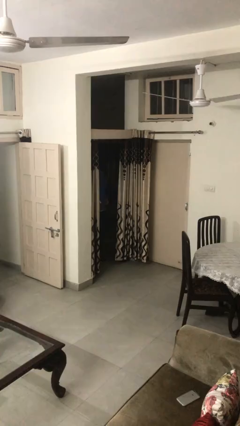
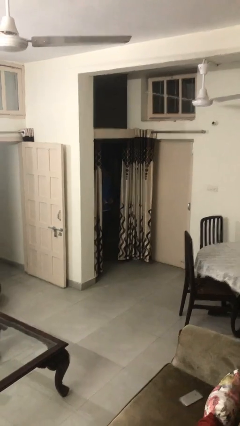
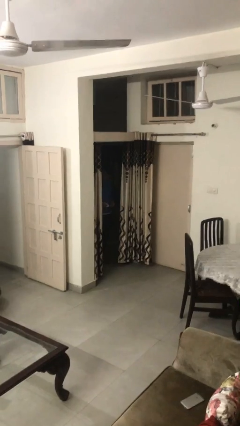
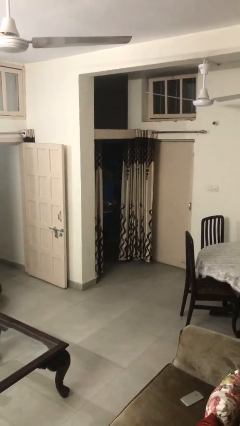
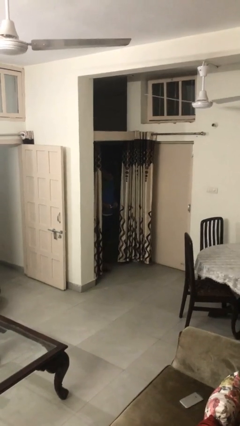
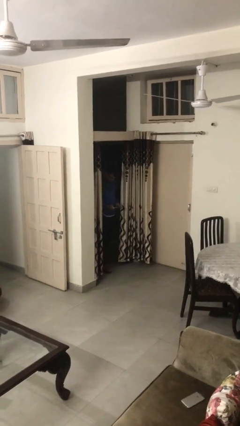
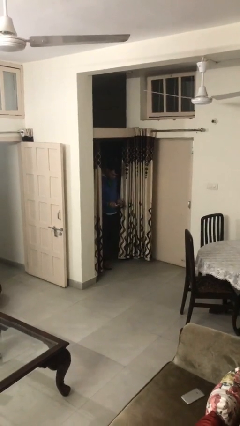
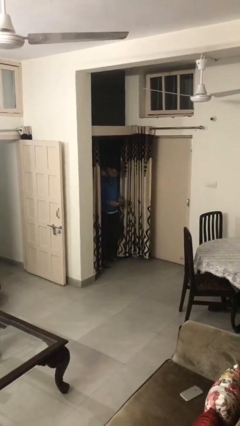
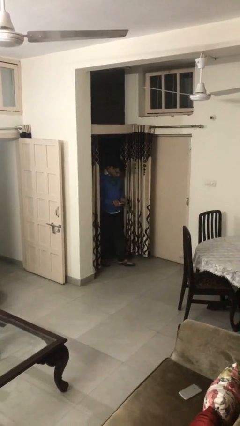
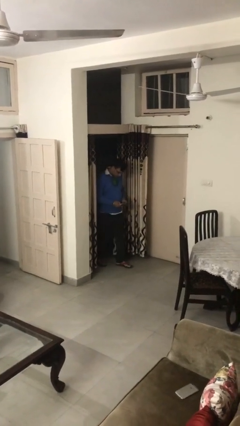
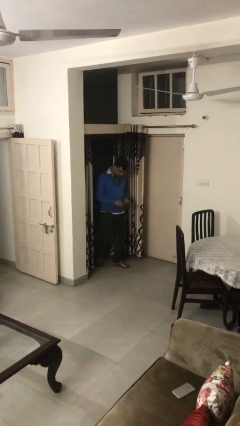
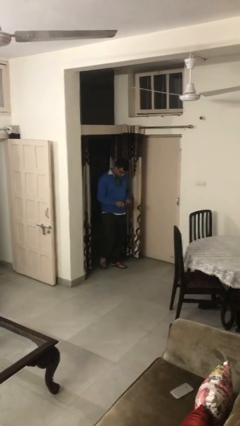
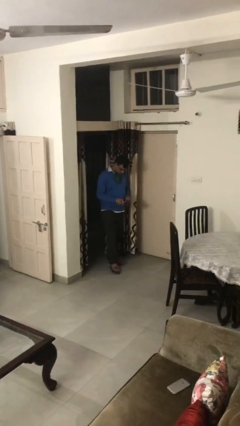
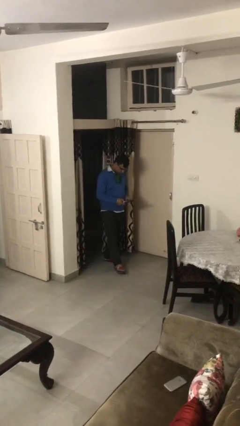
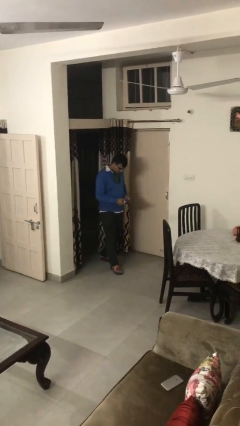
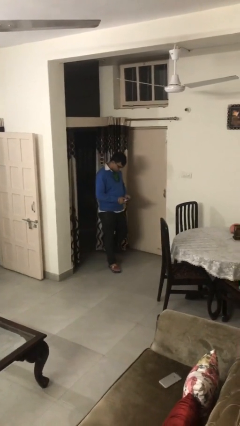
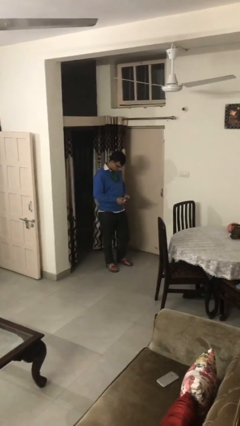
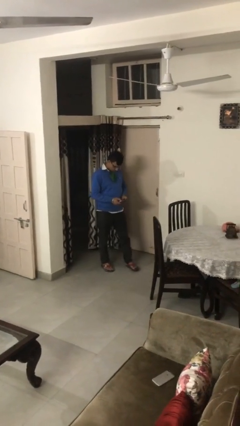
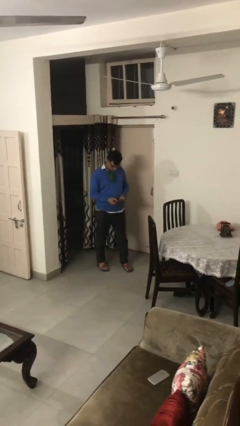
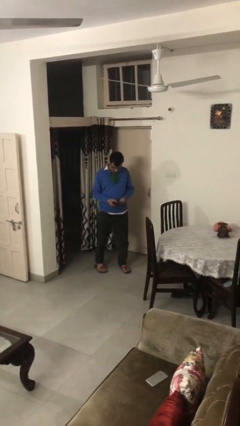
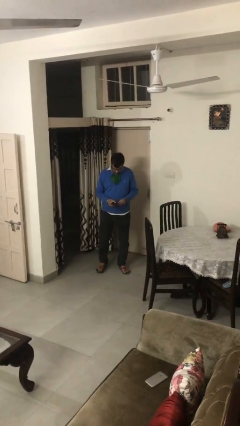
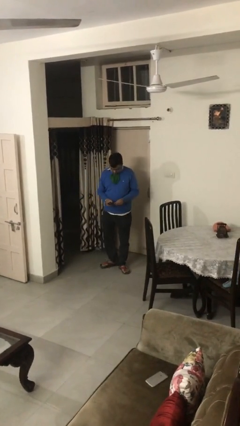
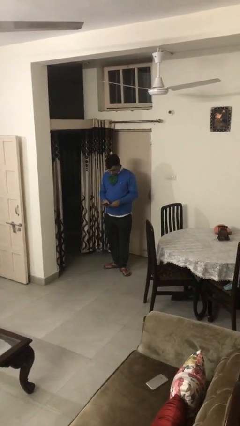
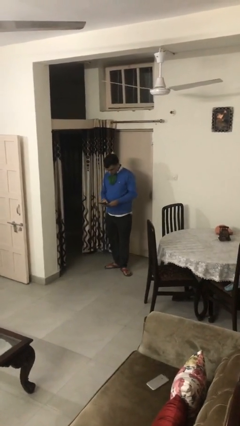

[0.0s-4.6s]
person enters scene through structure

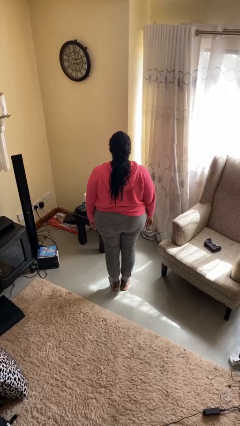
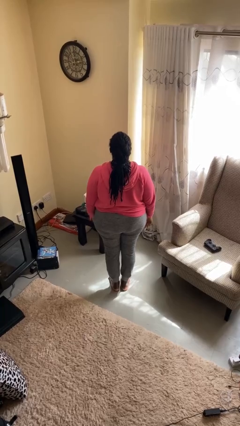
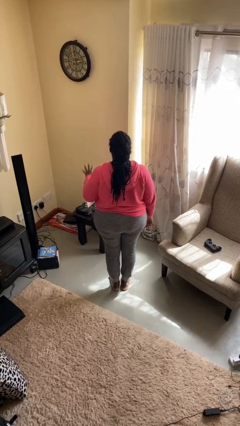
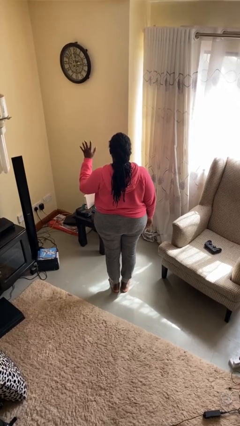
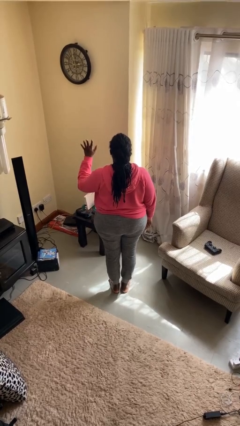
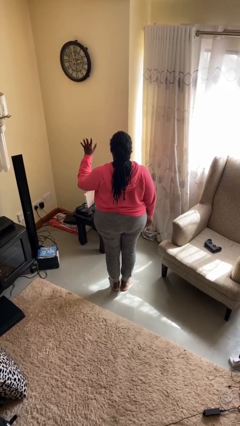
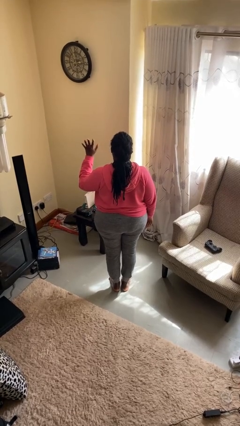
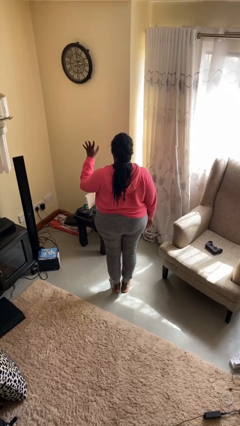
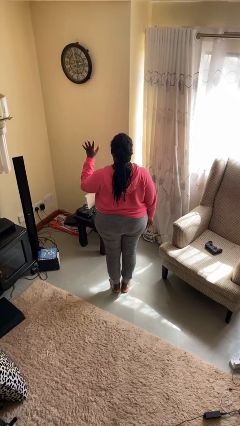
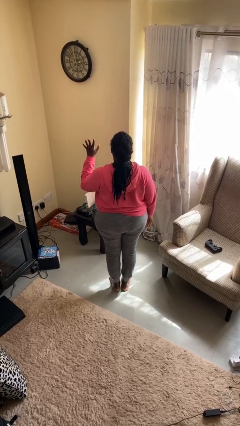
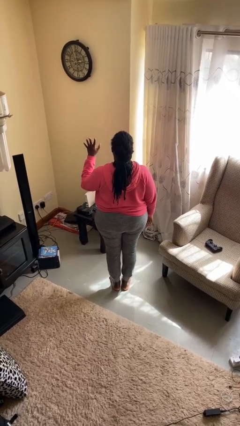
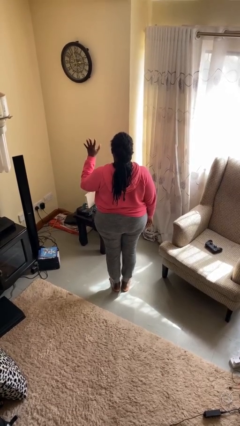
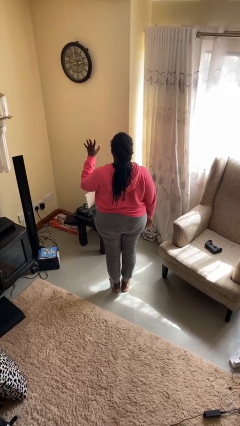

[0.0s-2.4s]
person gestures number five

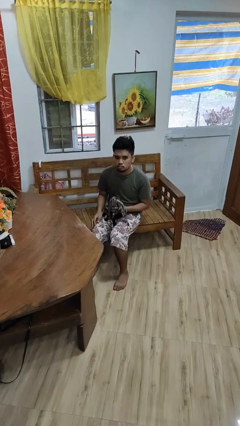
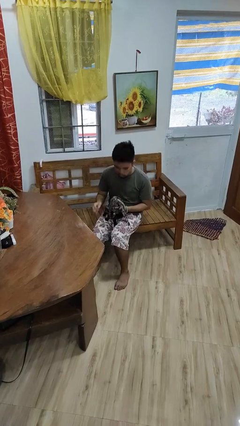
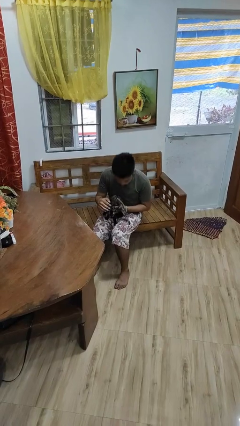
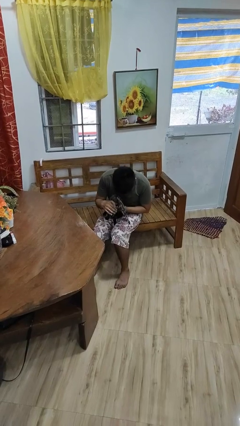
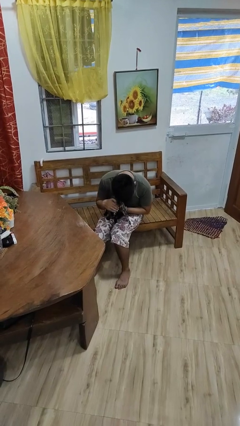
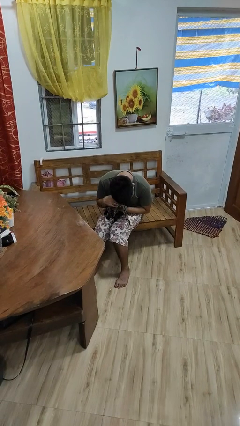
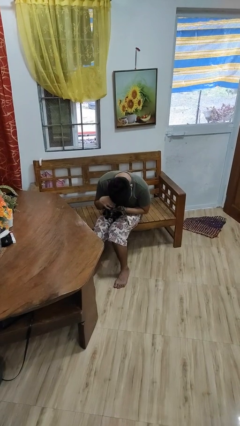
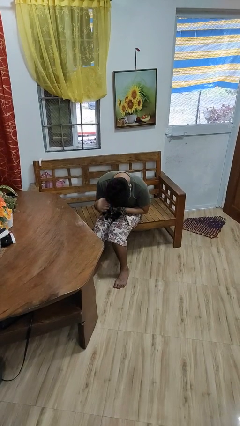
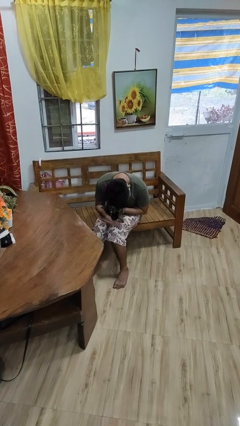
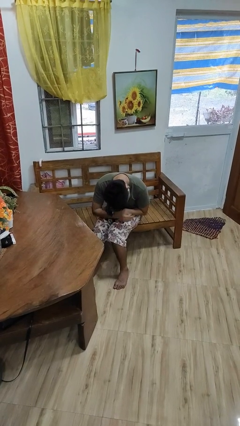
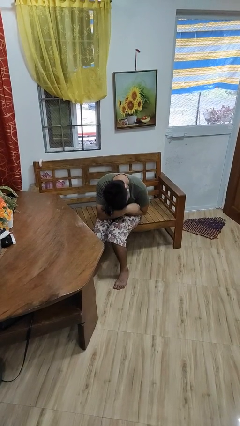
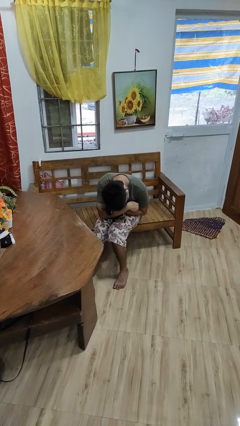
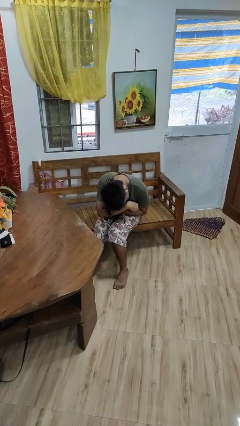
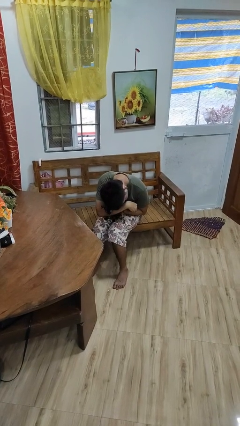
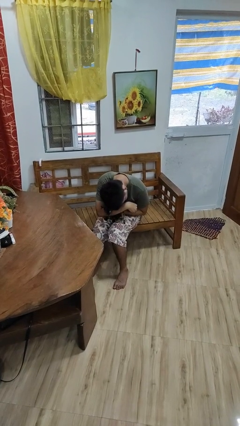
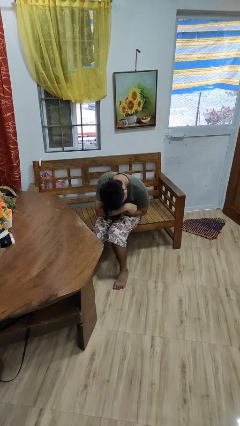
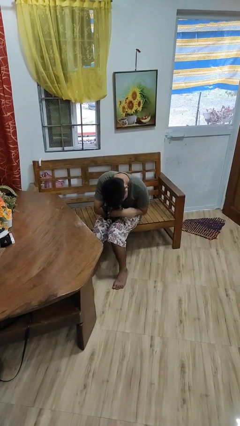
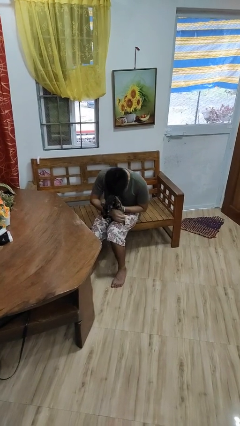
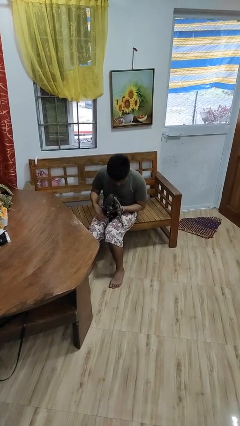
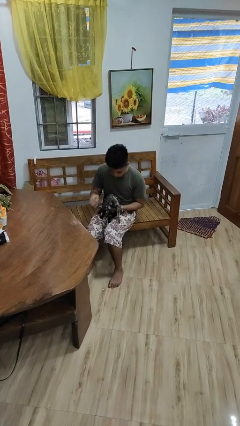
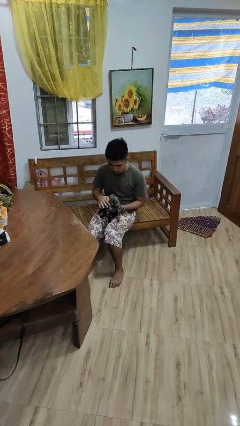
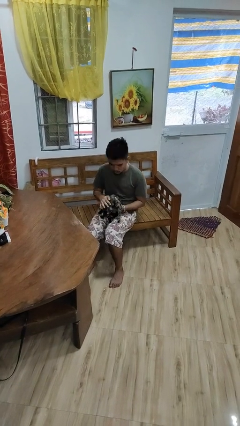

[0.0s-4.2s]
person hugs cat

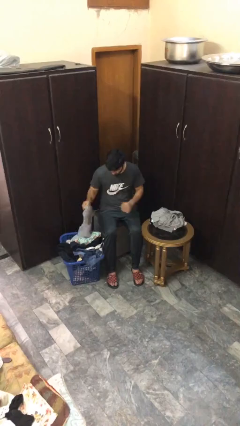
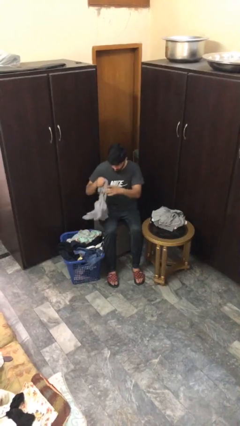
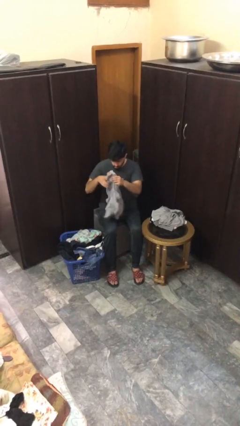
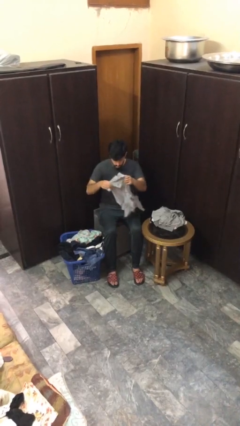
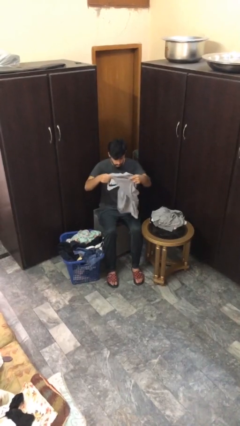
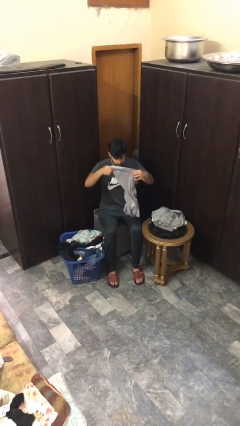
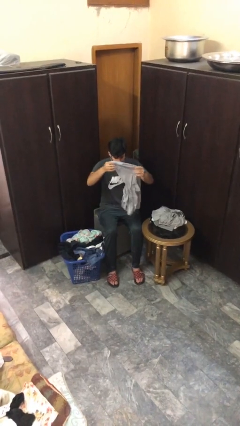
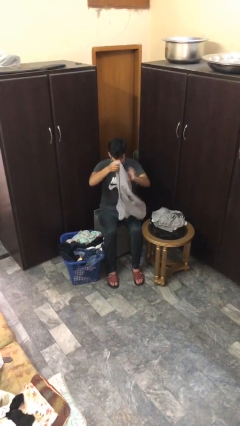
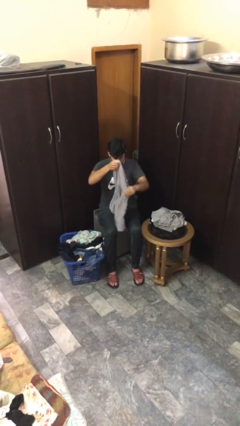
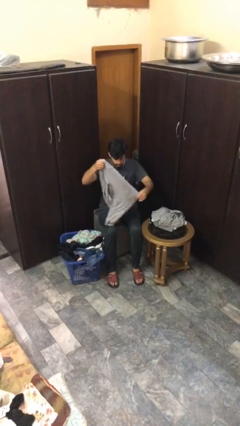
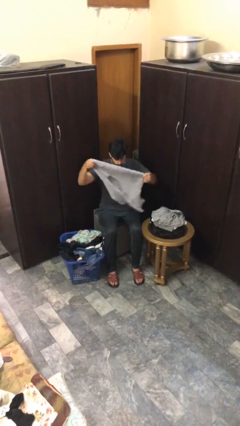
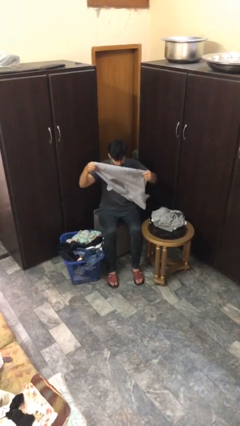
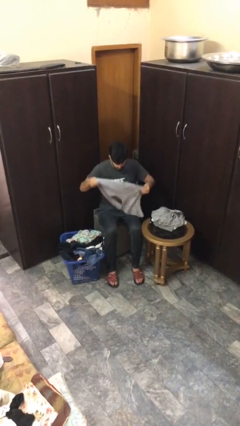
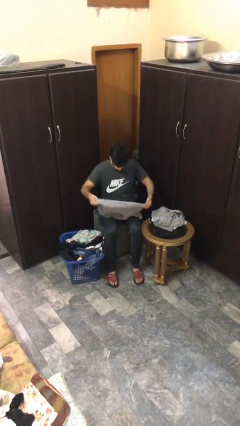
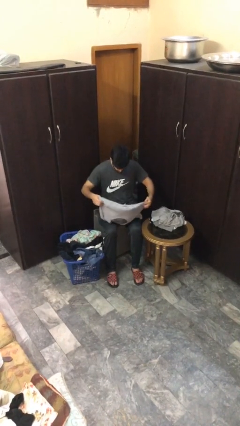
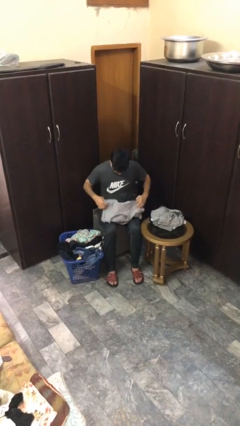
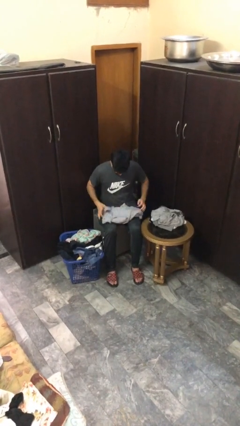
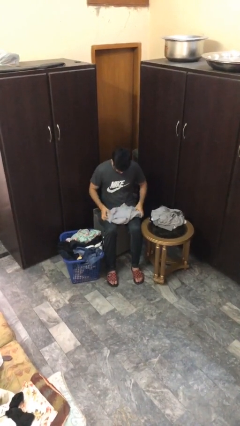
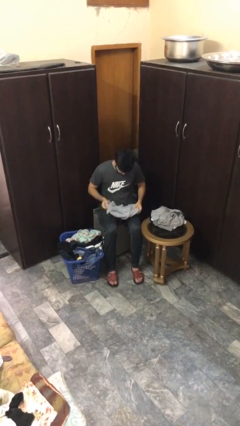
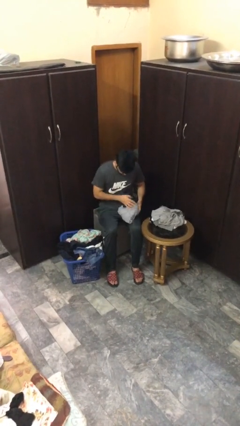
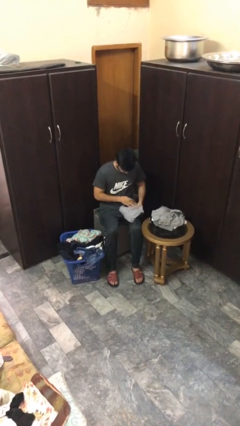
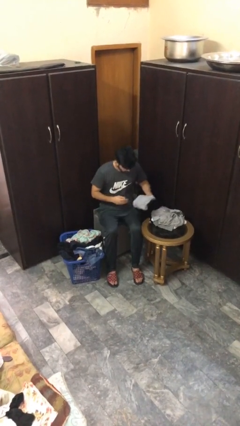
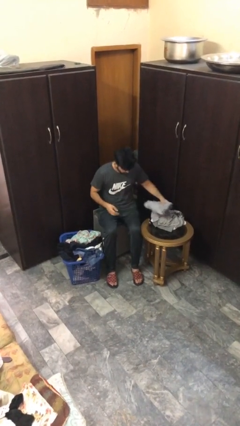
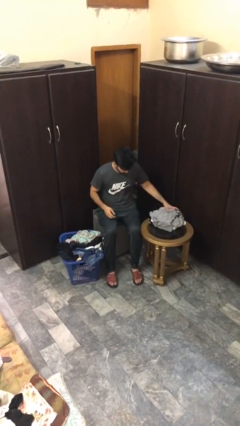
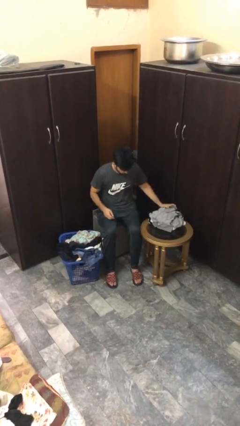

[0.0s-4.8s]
person folds shirt

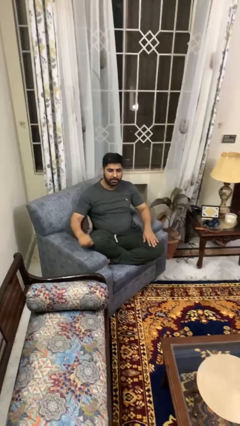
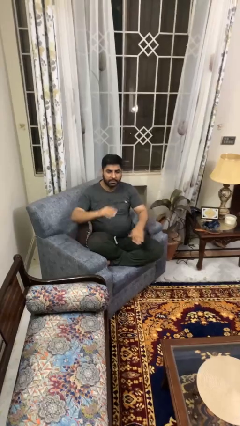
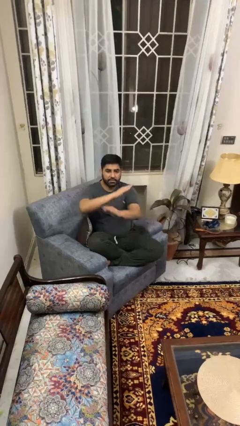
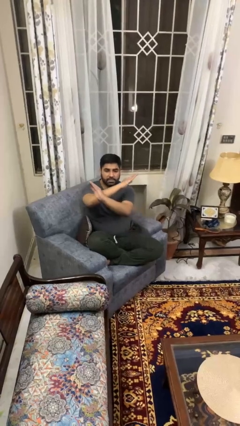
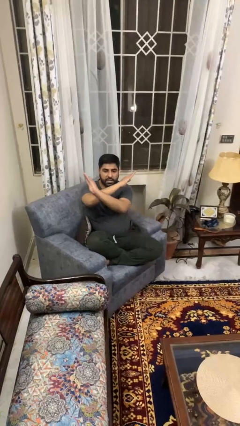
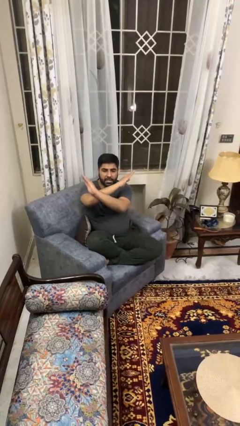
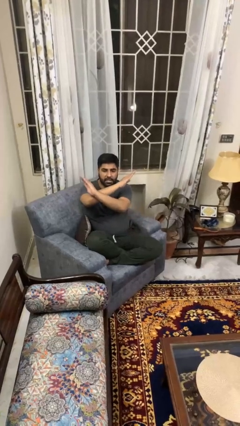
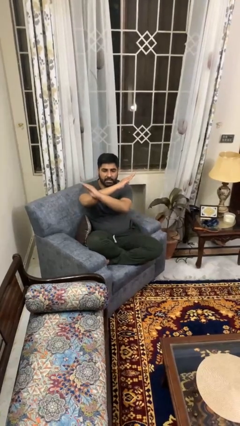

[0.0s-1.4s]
person gestures arms x
